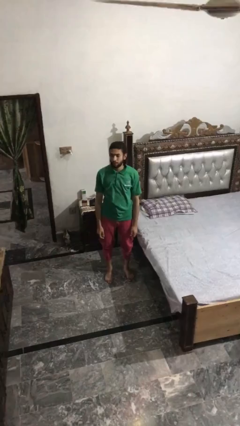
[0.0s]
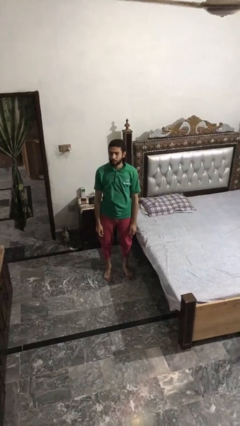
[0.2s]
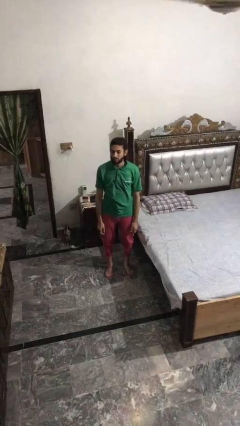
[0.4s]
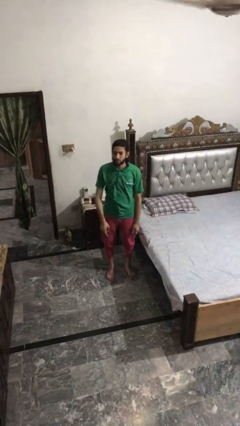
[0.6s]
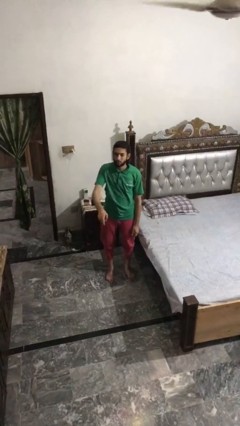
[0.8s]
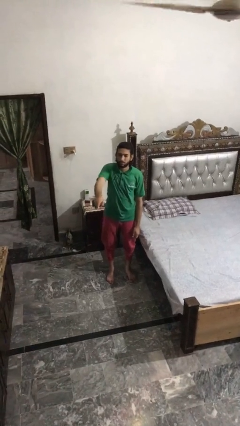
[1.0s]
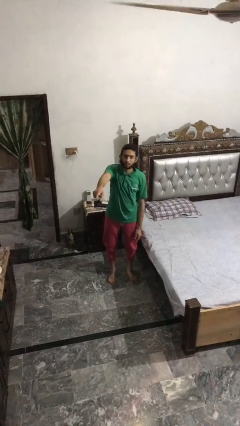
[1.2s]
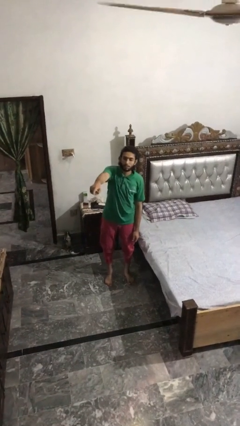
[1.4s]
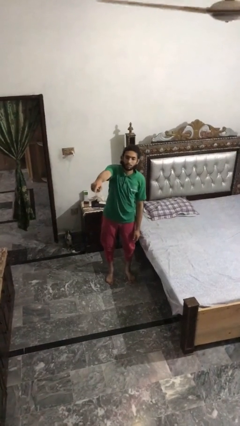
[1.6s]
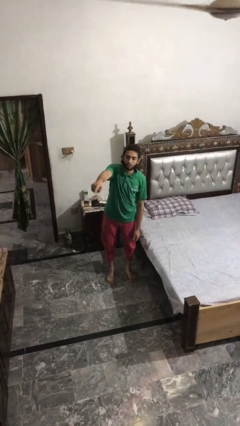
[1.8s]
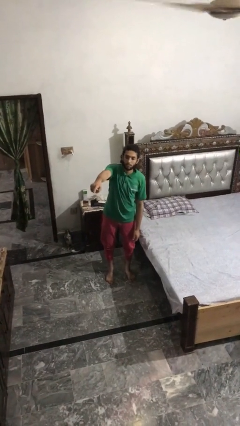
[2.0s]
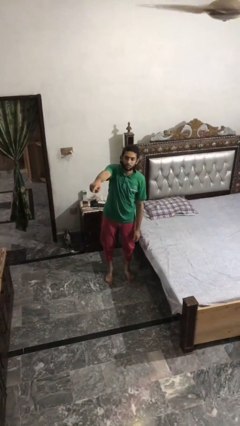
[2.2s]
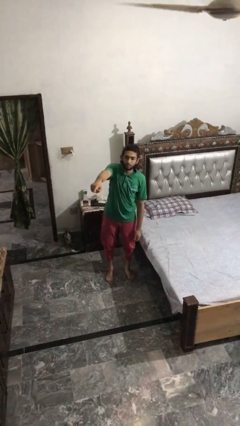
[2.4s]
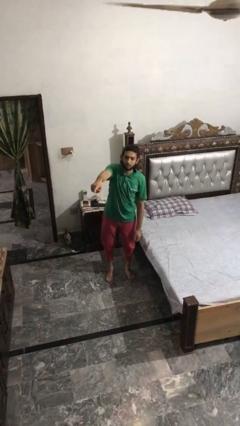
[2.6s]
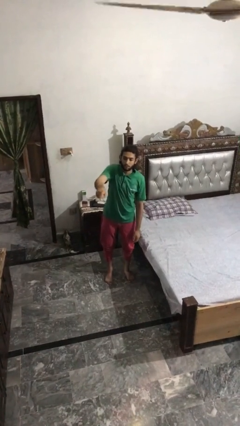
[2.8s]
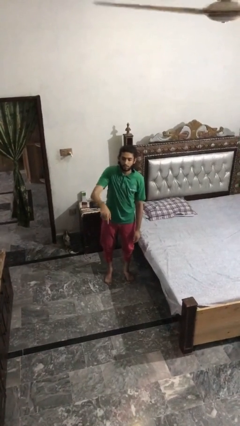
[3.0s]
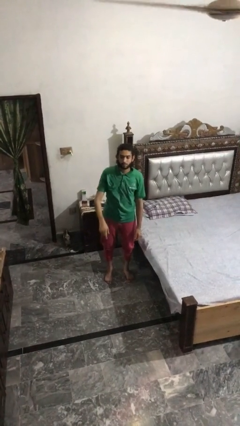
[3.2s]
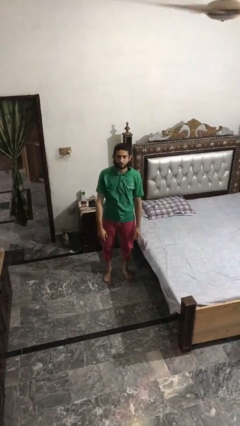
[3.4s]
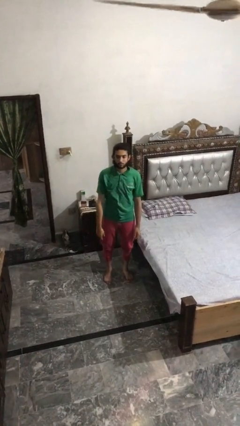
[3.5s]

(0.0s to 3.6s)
person points at person

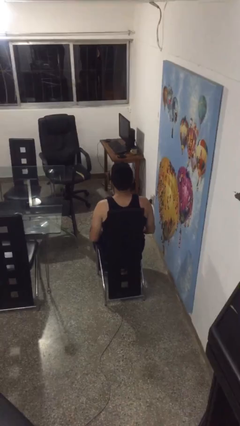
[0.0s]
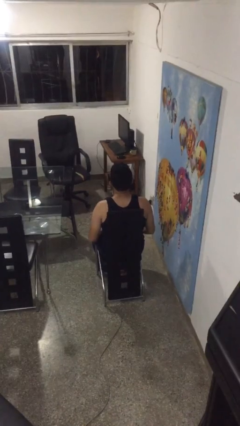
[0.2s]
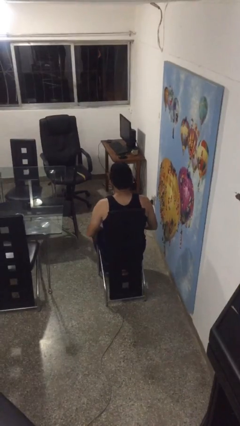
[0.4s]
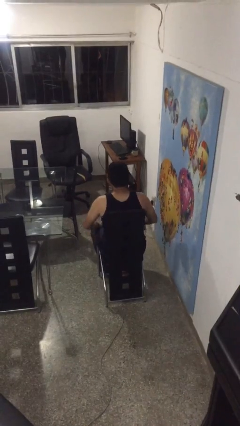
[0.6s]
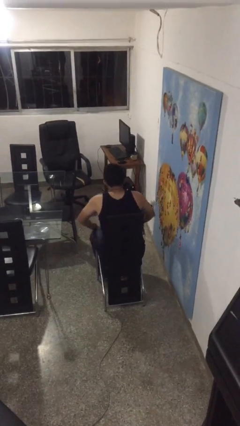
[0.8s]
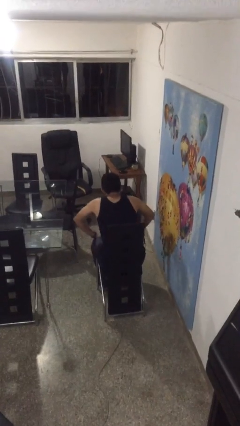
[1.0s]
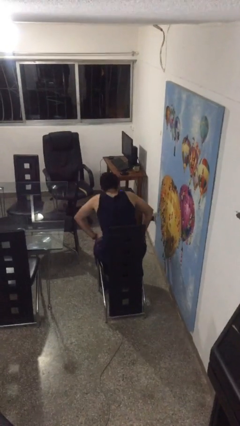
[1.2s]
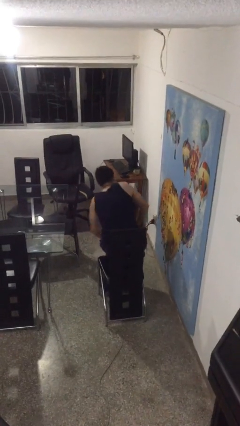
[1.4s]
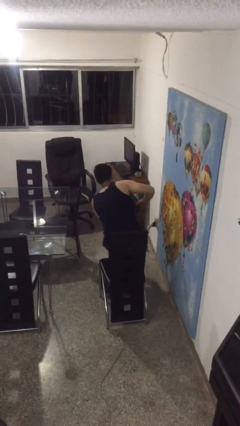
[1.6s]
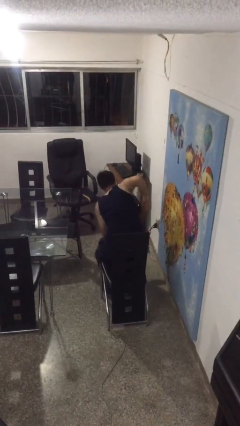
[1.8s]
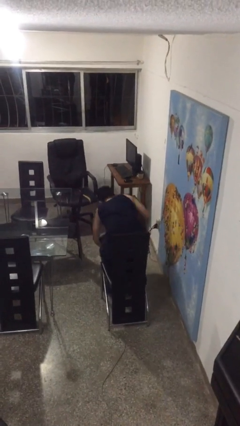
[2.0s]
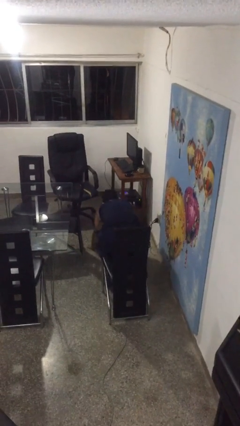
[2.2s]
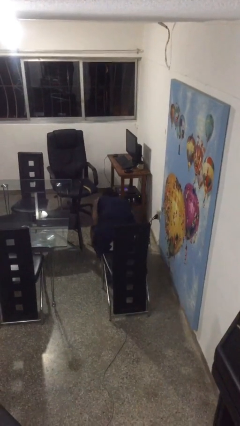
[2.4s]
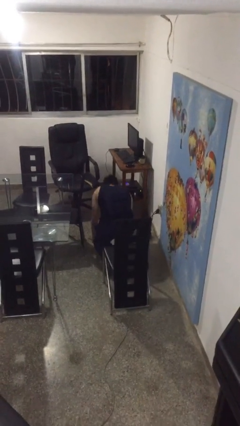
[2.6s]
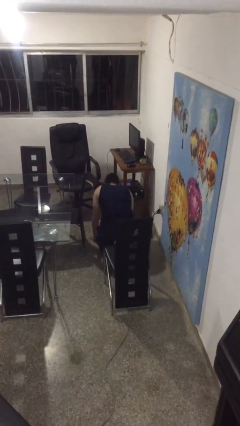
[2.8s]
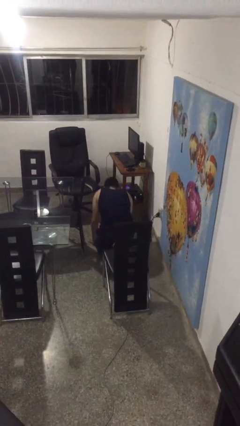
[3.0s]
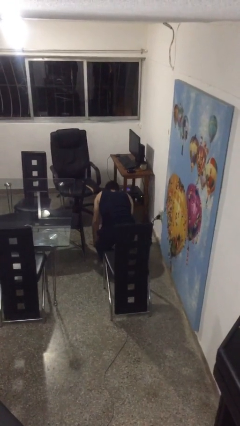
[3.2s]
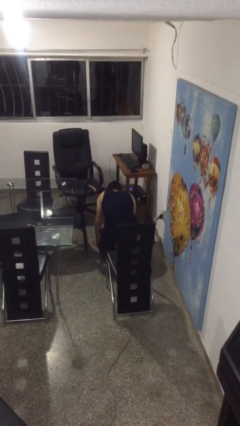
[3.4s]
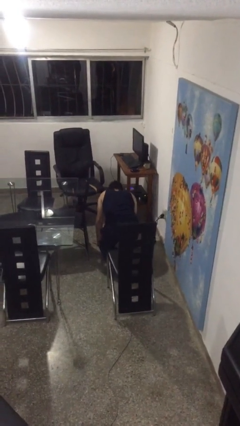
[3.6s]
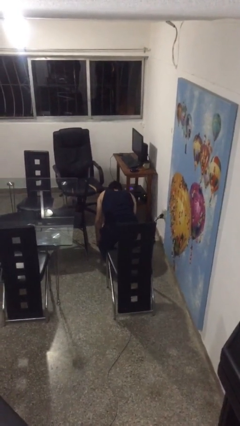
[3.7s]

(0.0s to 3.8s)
person falls from chair

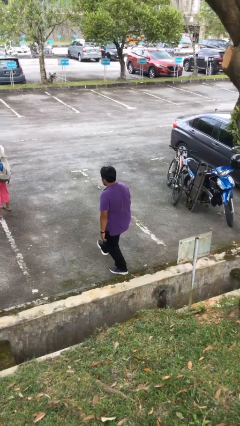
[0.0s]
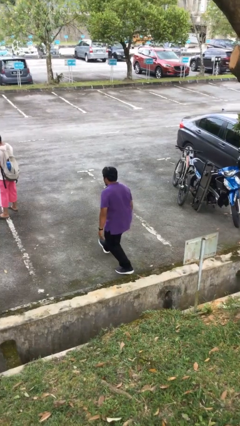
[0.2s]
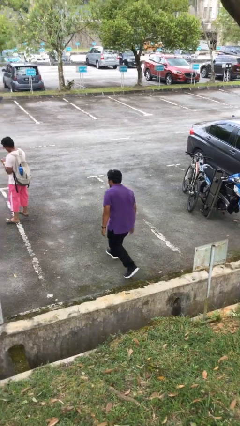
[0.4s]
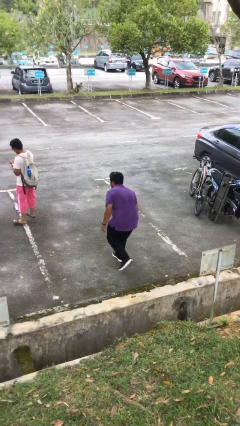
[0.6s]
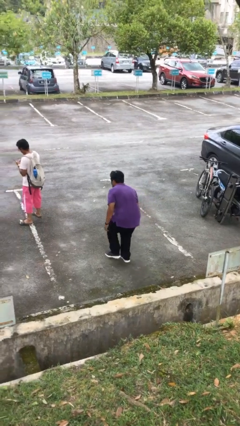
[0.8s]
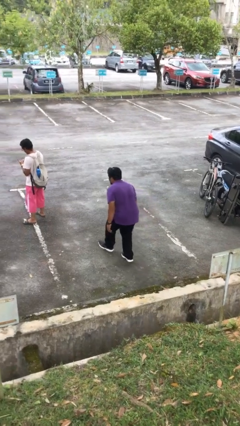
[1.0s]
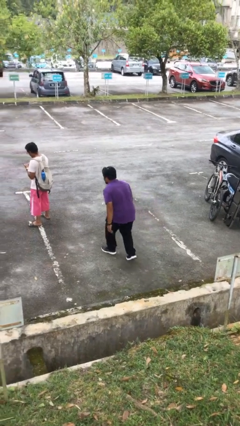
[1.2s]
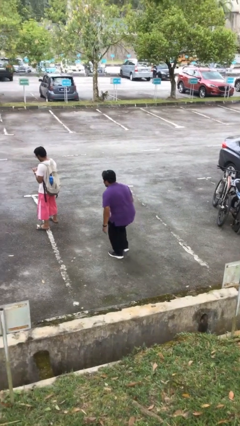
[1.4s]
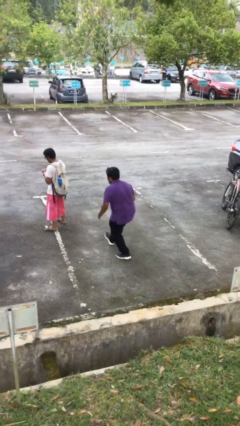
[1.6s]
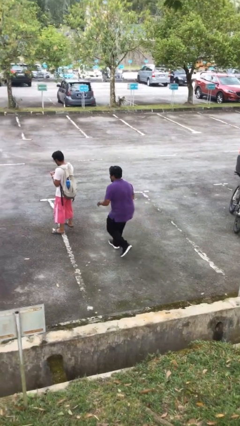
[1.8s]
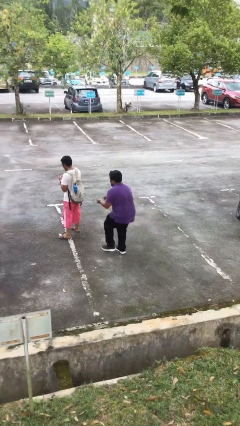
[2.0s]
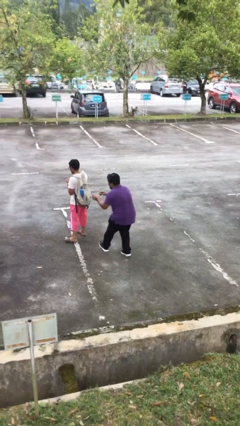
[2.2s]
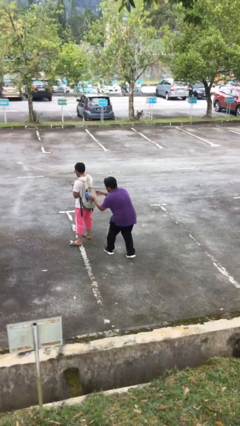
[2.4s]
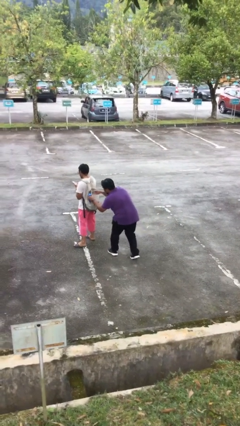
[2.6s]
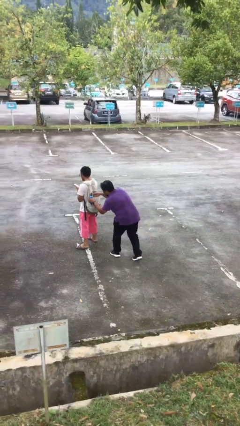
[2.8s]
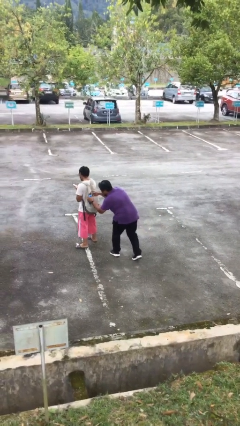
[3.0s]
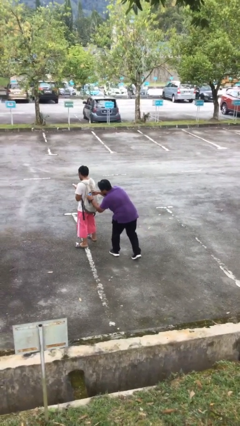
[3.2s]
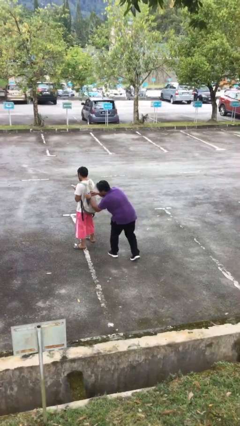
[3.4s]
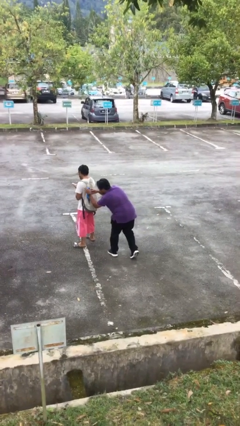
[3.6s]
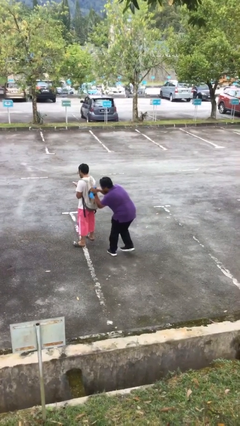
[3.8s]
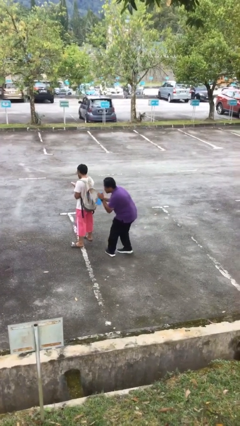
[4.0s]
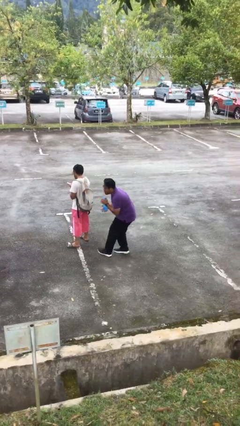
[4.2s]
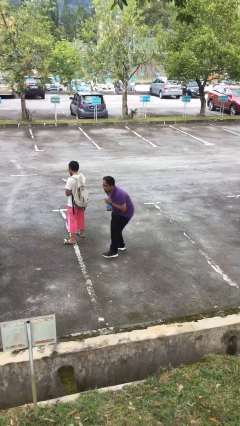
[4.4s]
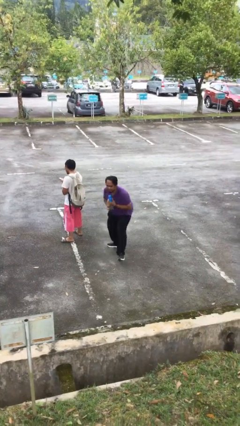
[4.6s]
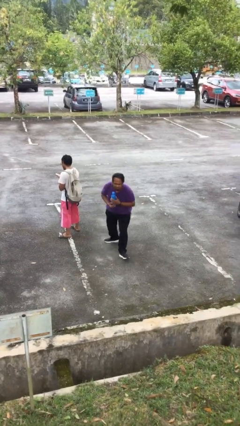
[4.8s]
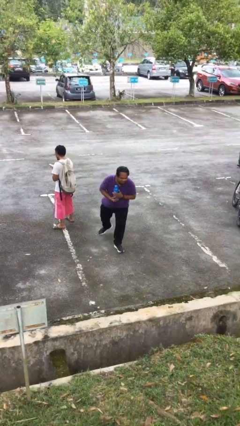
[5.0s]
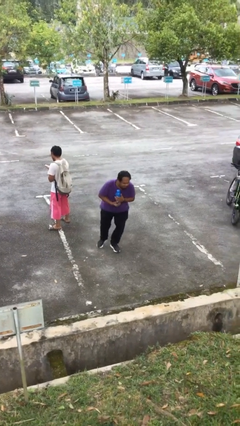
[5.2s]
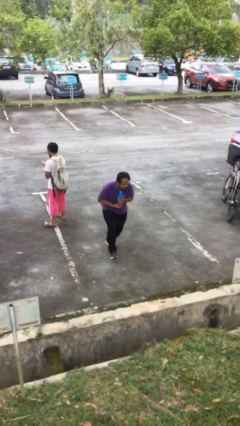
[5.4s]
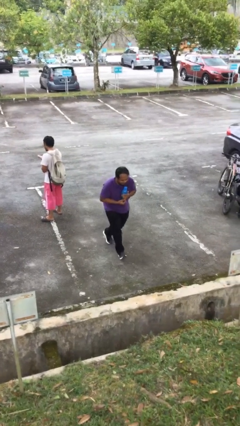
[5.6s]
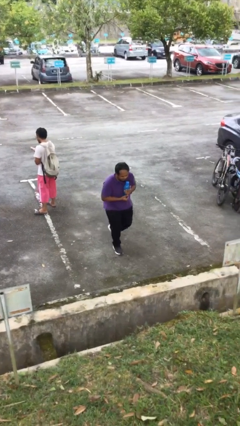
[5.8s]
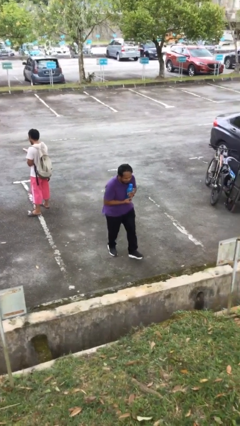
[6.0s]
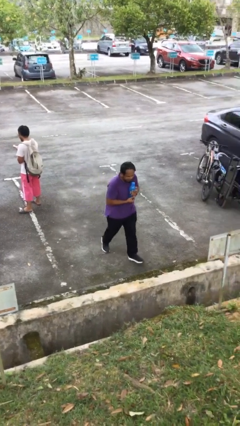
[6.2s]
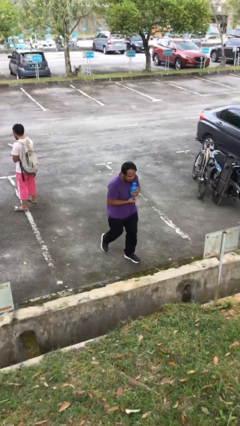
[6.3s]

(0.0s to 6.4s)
person steals object from person

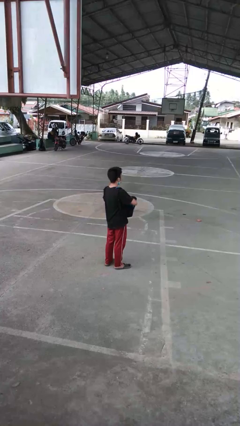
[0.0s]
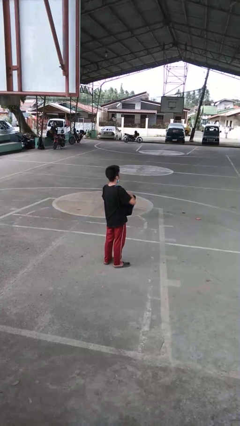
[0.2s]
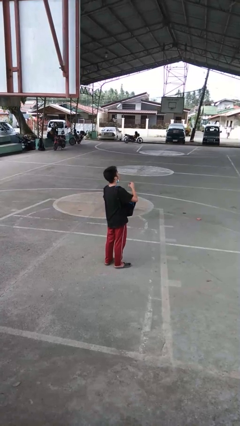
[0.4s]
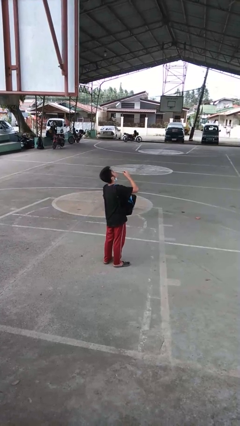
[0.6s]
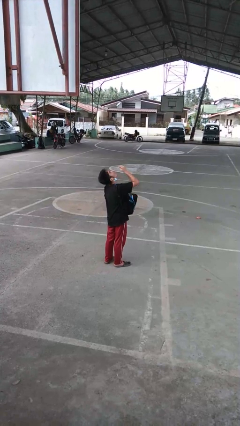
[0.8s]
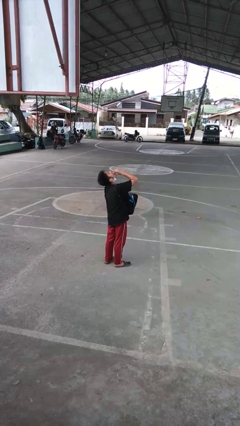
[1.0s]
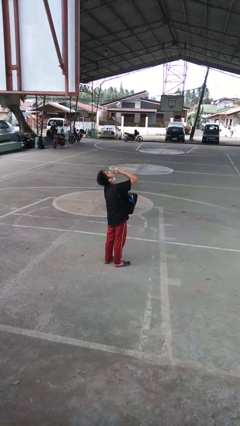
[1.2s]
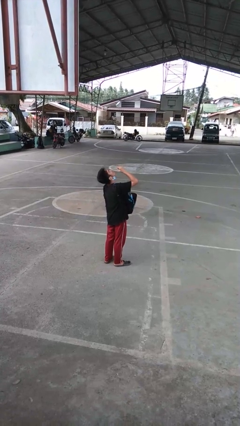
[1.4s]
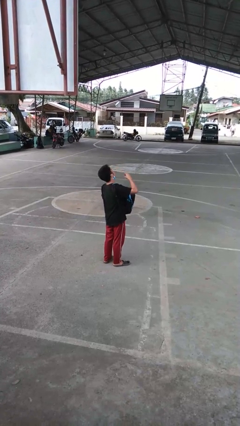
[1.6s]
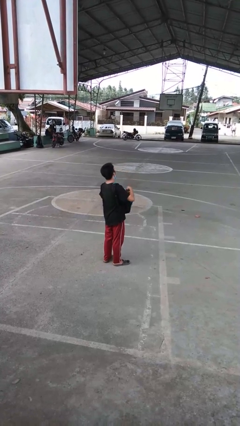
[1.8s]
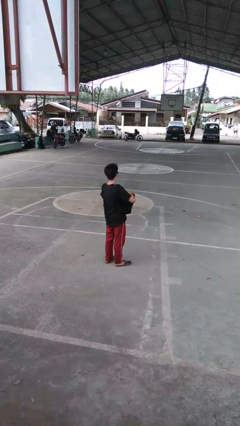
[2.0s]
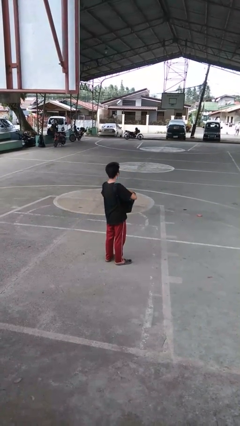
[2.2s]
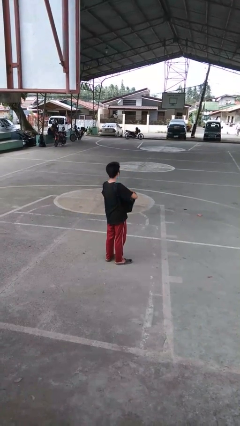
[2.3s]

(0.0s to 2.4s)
person eats snack from bag

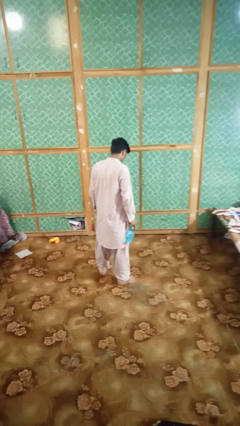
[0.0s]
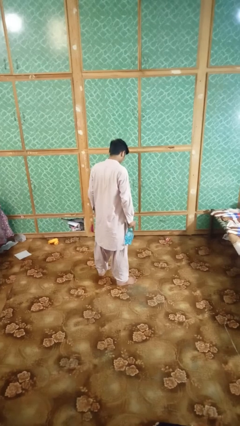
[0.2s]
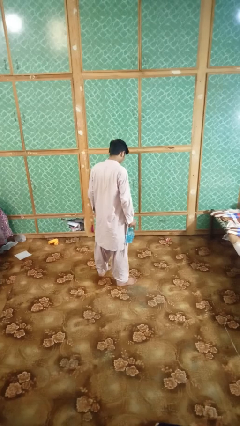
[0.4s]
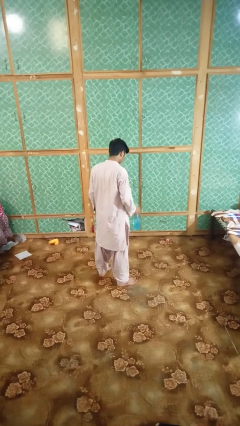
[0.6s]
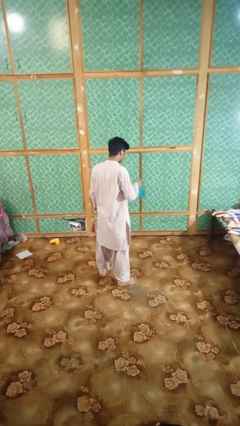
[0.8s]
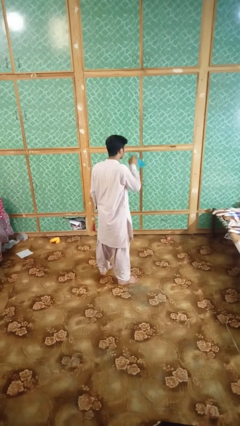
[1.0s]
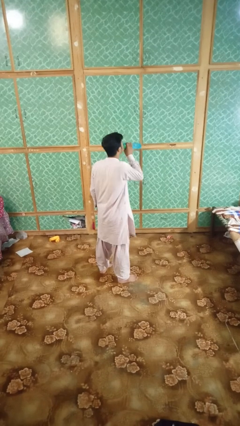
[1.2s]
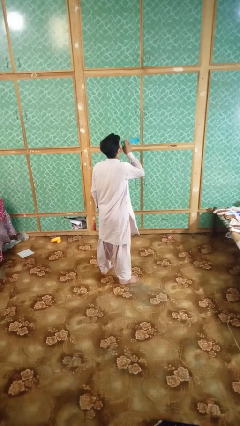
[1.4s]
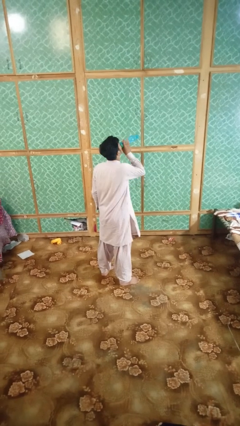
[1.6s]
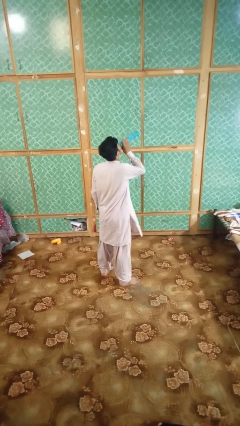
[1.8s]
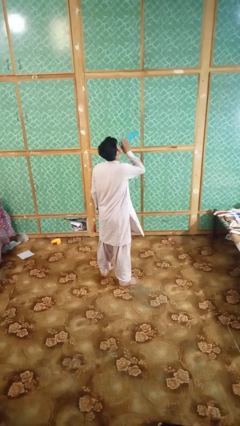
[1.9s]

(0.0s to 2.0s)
person drinks from bottle
